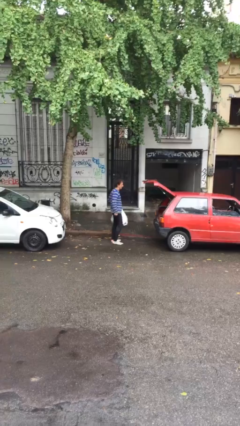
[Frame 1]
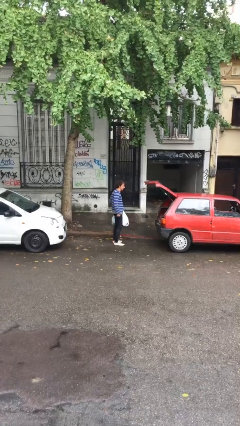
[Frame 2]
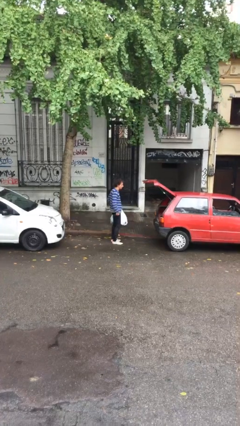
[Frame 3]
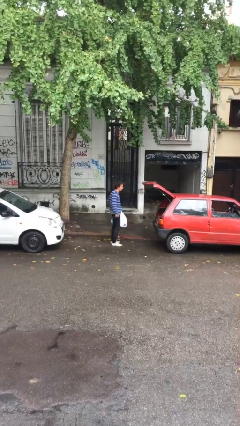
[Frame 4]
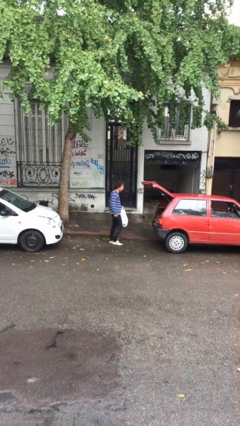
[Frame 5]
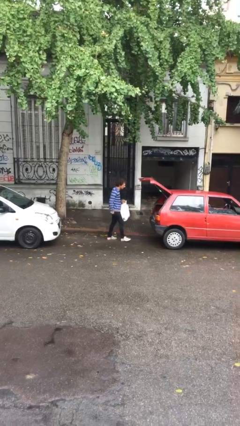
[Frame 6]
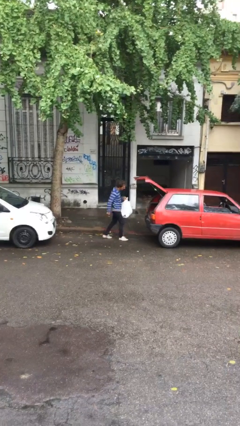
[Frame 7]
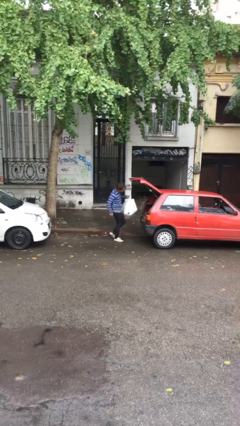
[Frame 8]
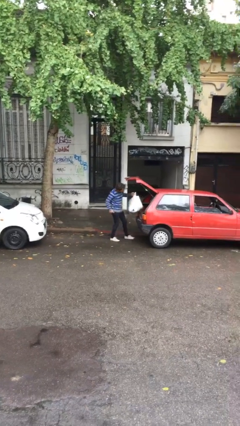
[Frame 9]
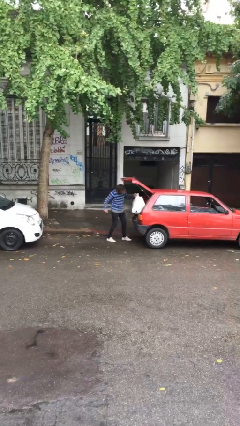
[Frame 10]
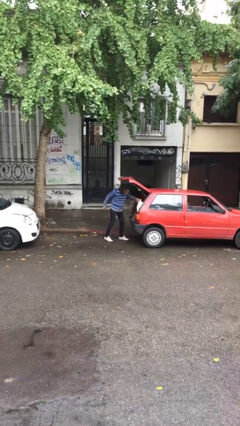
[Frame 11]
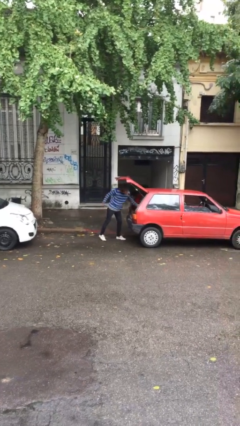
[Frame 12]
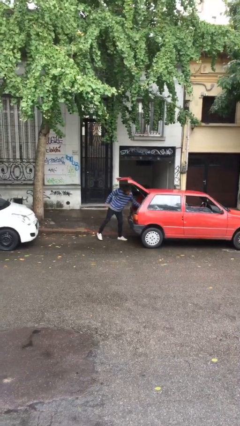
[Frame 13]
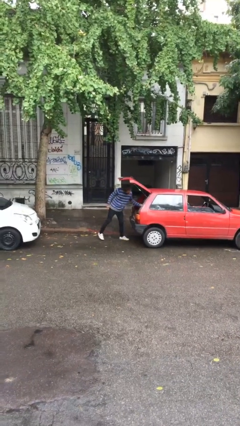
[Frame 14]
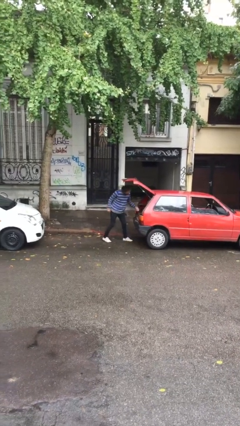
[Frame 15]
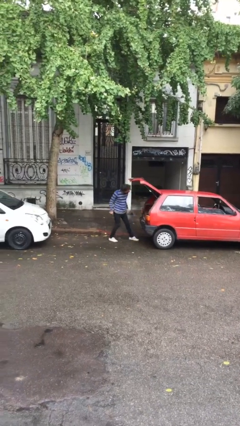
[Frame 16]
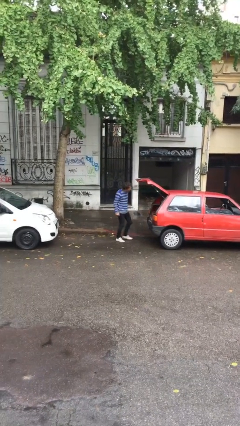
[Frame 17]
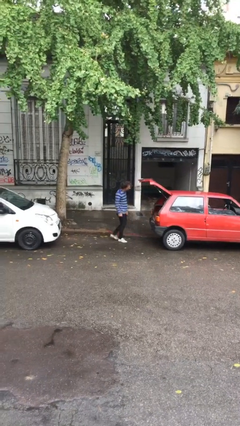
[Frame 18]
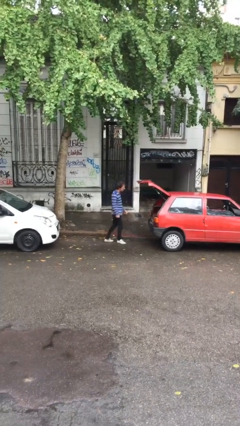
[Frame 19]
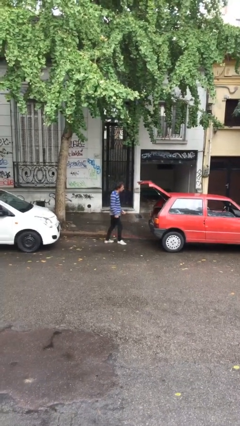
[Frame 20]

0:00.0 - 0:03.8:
person loads car

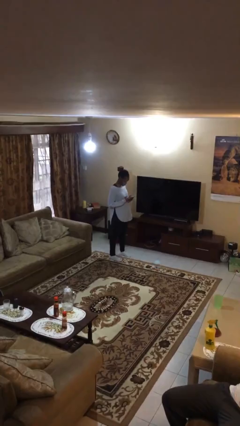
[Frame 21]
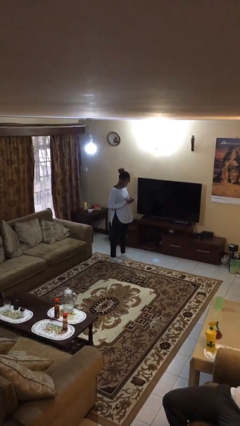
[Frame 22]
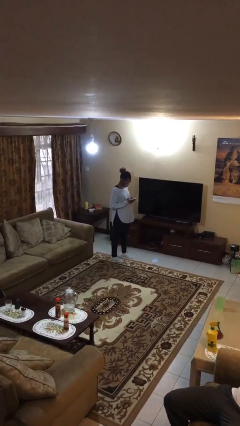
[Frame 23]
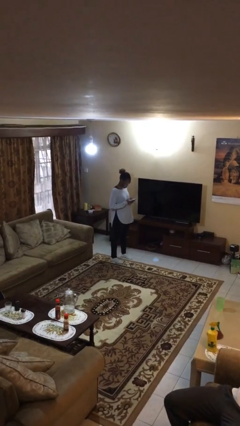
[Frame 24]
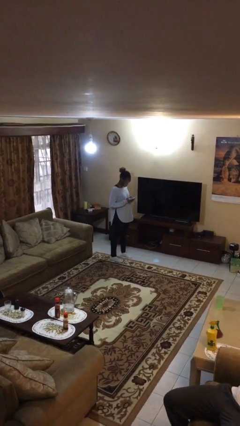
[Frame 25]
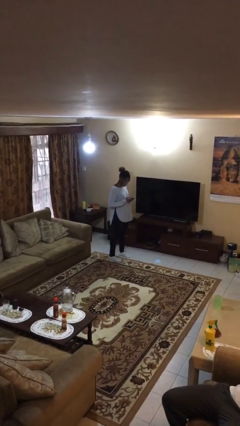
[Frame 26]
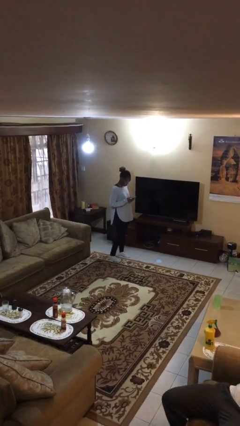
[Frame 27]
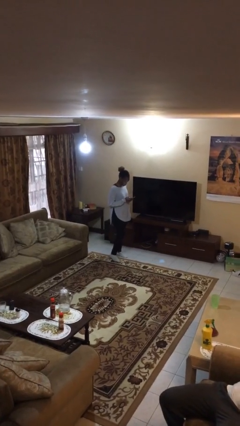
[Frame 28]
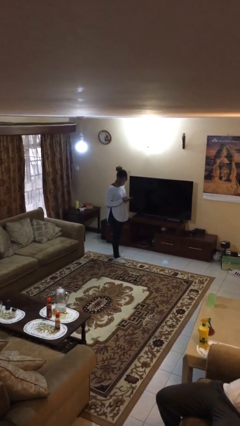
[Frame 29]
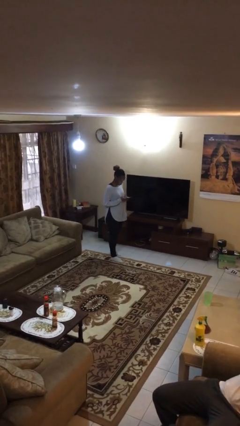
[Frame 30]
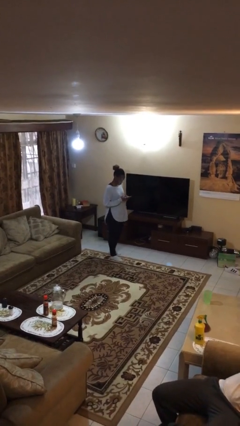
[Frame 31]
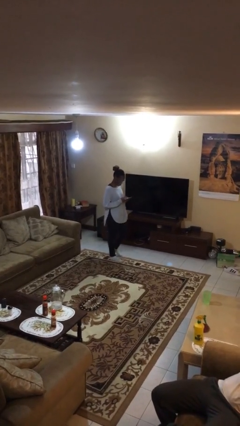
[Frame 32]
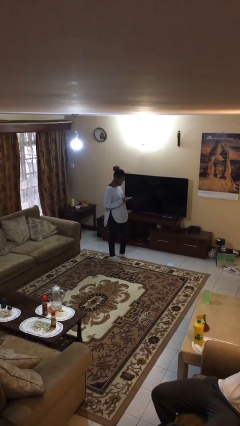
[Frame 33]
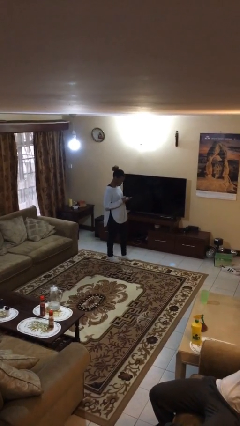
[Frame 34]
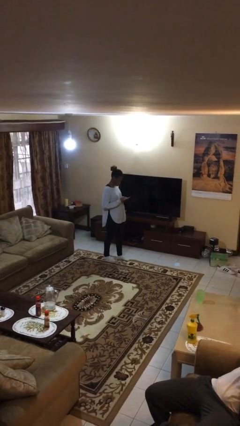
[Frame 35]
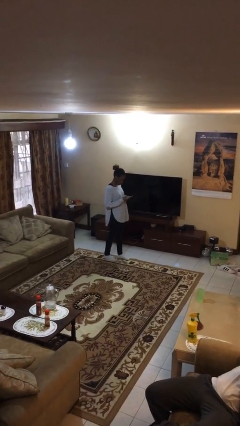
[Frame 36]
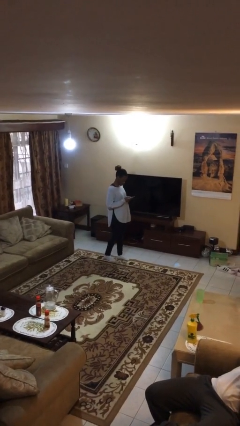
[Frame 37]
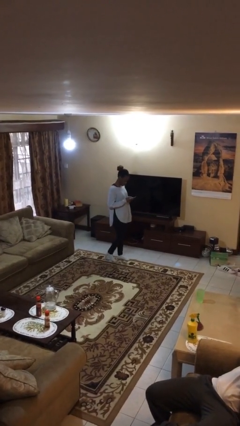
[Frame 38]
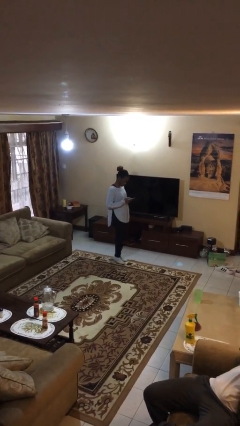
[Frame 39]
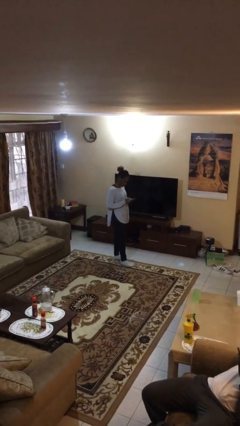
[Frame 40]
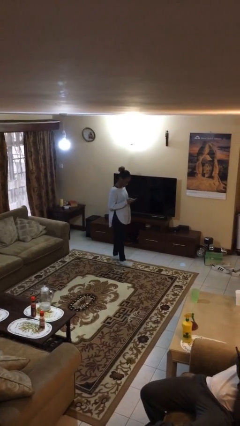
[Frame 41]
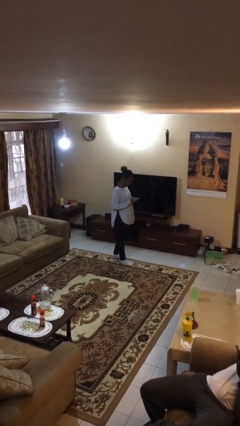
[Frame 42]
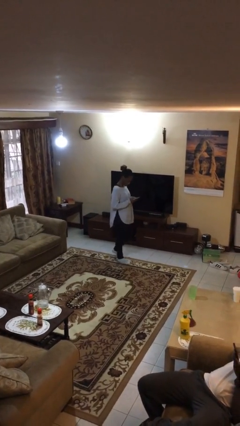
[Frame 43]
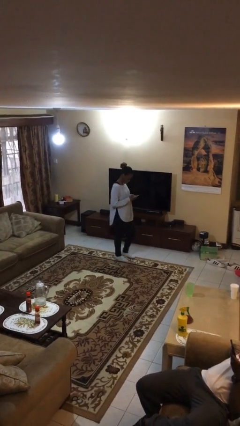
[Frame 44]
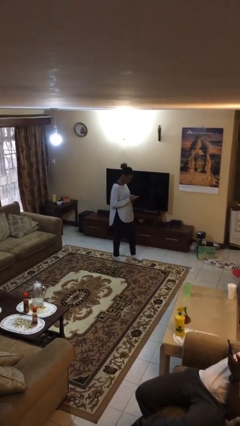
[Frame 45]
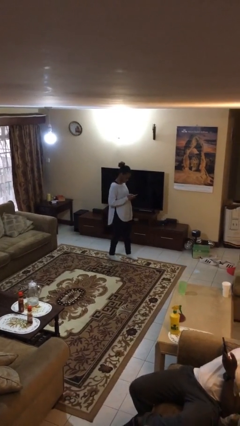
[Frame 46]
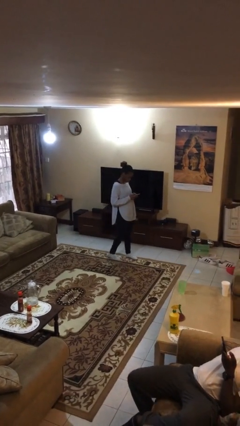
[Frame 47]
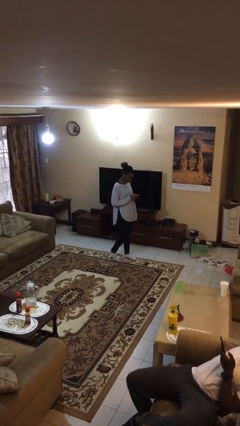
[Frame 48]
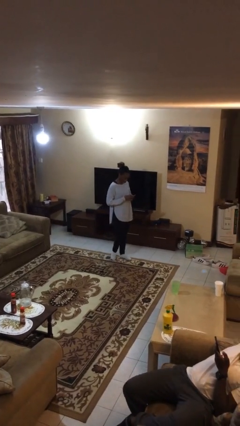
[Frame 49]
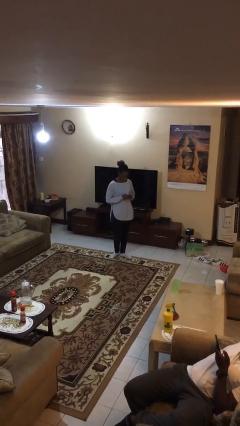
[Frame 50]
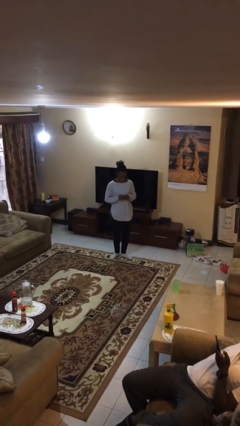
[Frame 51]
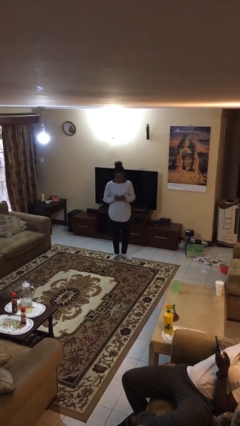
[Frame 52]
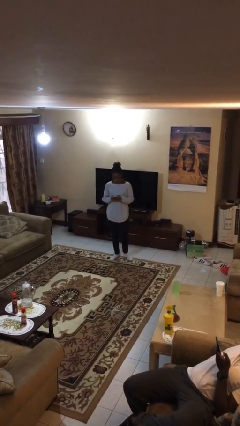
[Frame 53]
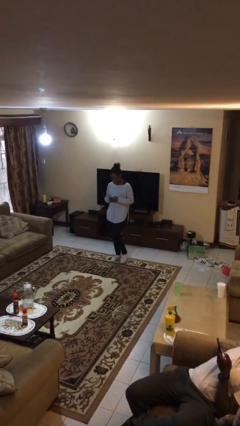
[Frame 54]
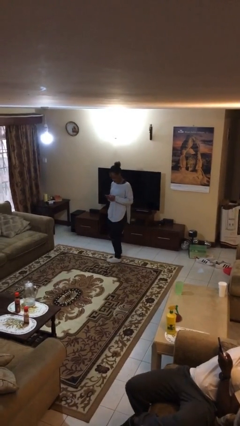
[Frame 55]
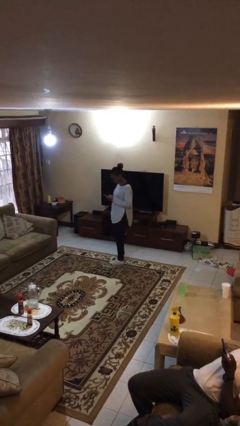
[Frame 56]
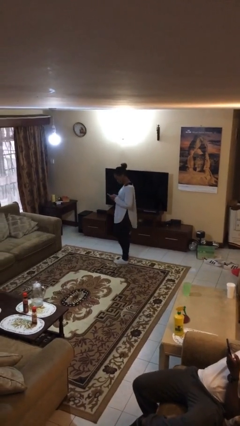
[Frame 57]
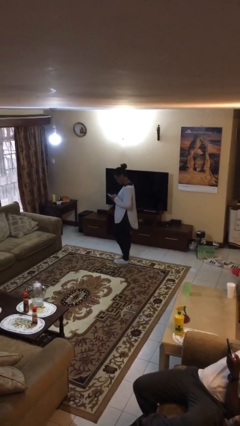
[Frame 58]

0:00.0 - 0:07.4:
person texts on phone

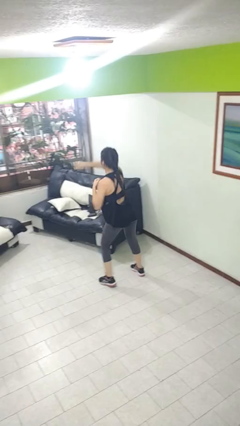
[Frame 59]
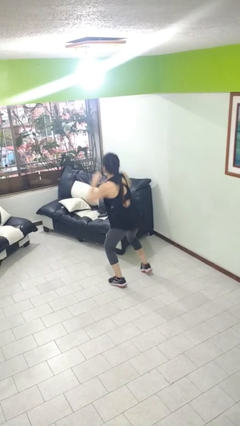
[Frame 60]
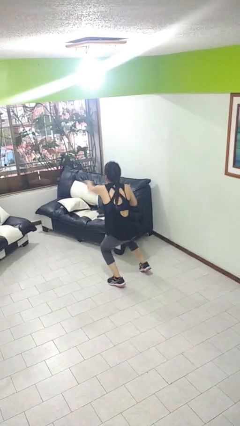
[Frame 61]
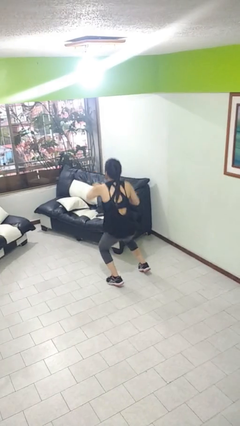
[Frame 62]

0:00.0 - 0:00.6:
person punches

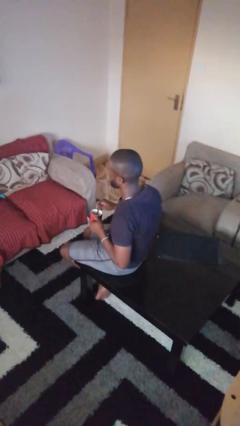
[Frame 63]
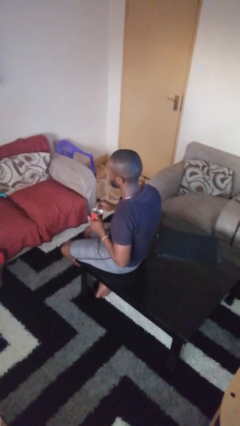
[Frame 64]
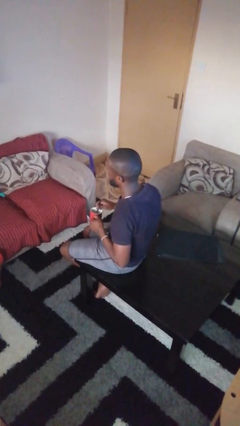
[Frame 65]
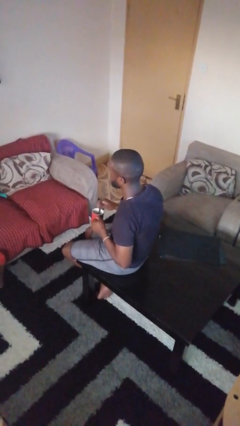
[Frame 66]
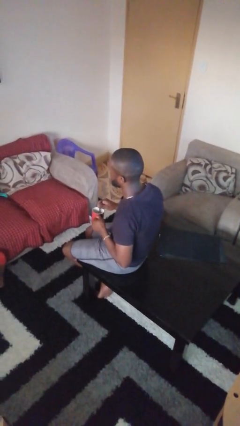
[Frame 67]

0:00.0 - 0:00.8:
person stirs mug

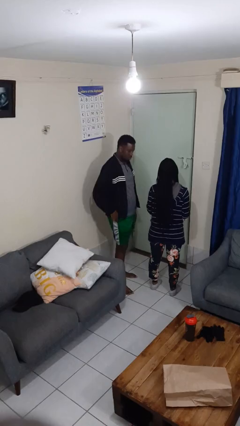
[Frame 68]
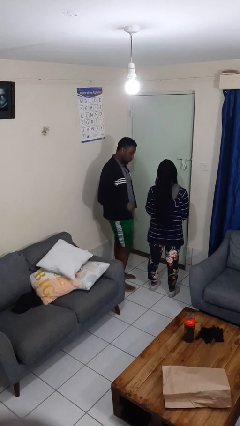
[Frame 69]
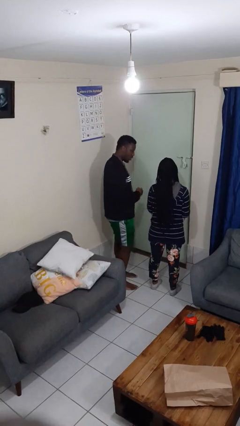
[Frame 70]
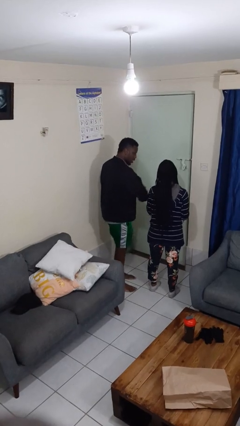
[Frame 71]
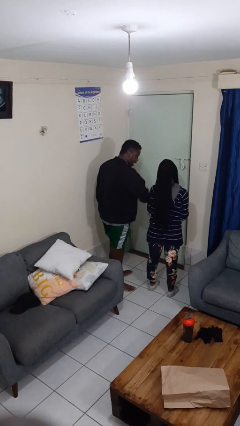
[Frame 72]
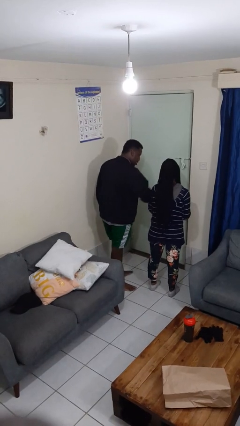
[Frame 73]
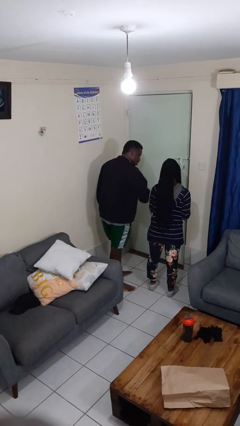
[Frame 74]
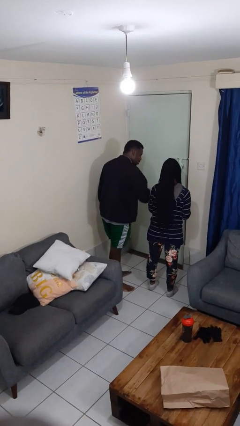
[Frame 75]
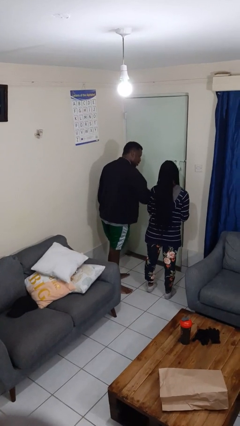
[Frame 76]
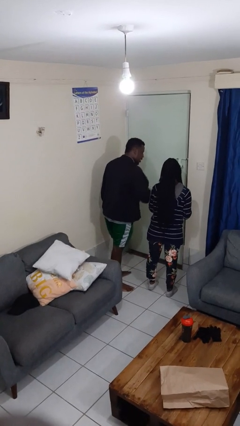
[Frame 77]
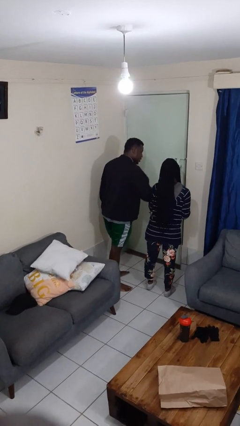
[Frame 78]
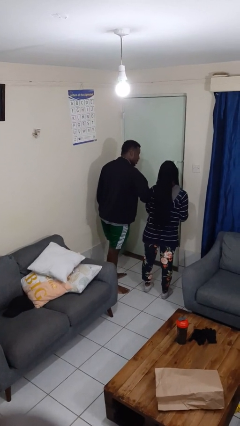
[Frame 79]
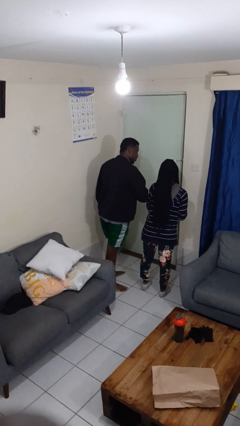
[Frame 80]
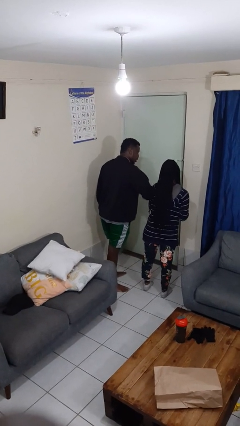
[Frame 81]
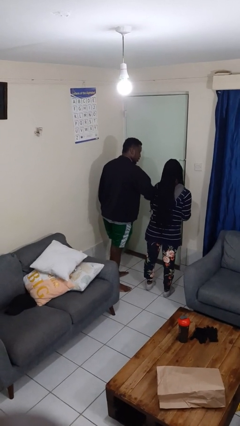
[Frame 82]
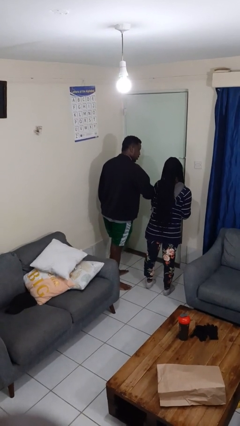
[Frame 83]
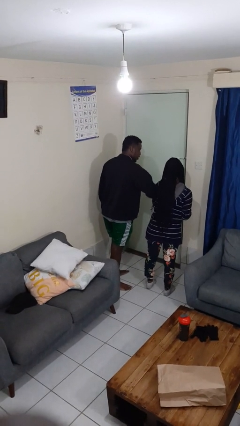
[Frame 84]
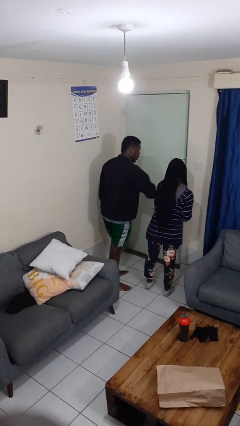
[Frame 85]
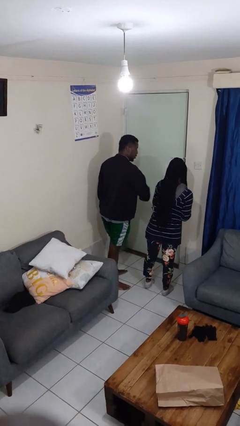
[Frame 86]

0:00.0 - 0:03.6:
person nudges person with elbow

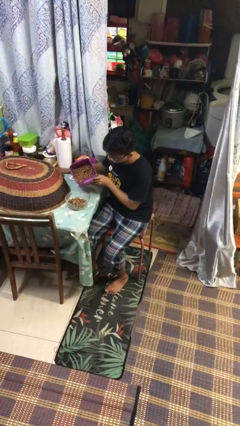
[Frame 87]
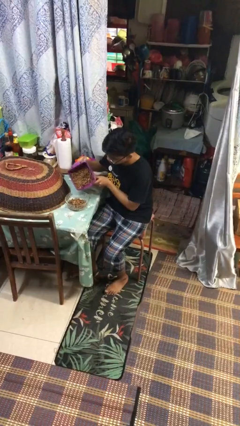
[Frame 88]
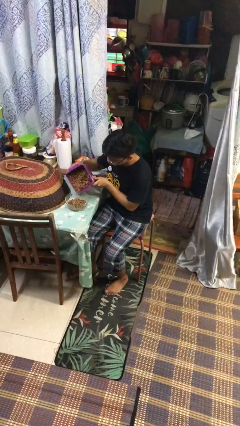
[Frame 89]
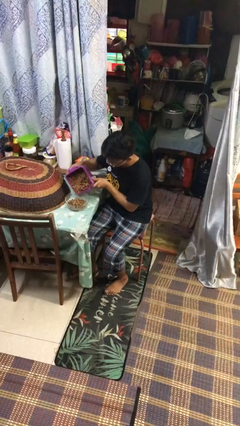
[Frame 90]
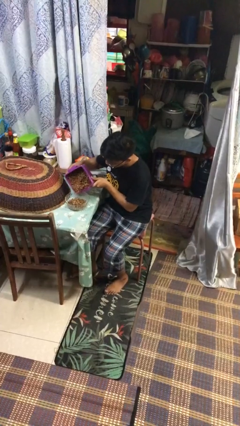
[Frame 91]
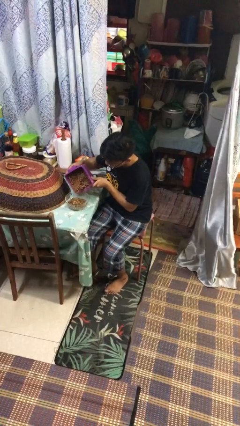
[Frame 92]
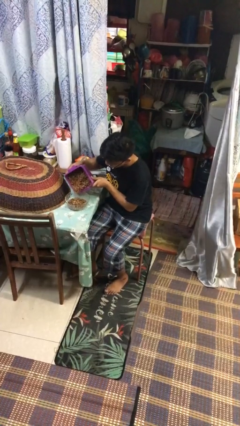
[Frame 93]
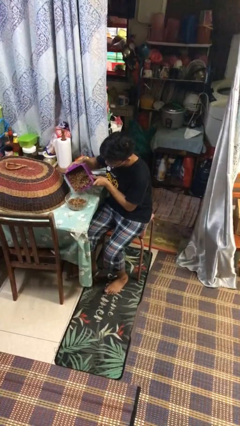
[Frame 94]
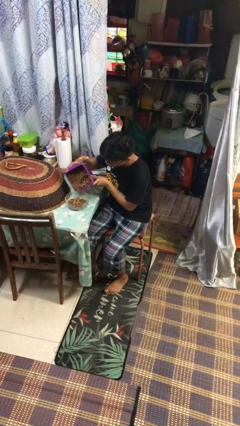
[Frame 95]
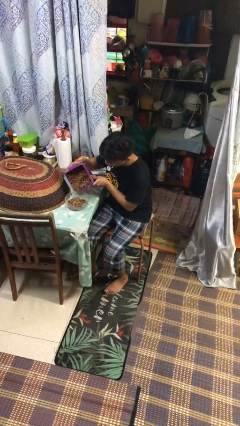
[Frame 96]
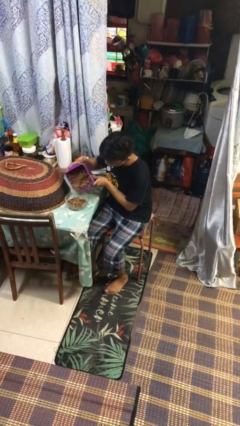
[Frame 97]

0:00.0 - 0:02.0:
person pours into bowl
